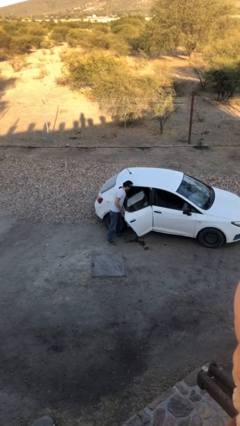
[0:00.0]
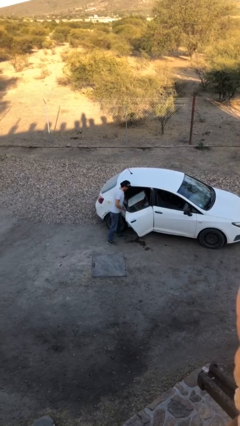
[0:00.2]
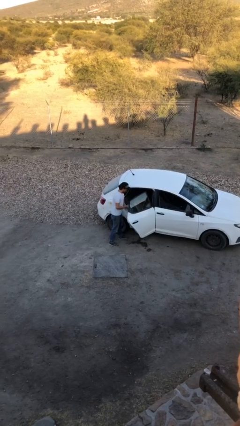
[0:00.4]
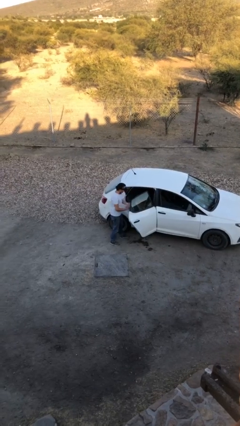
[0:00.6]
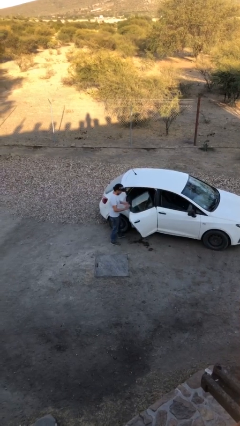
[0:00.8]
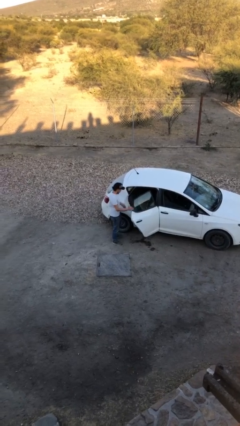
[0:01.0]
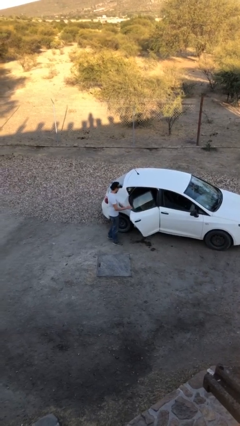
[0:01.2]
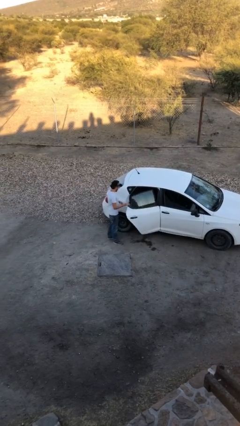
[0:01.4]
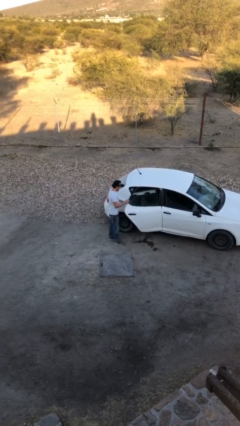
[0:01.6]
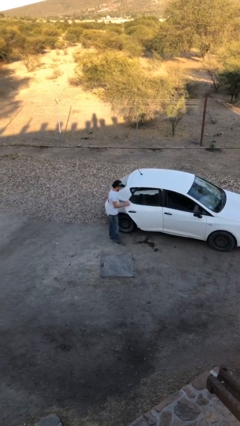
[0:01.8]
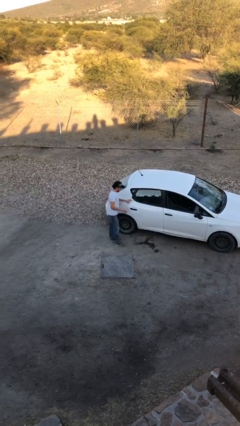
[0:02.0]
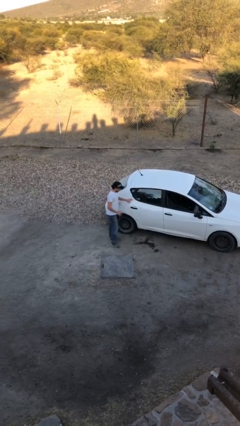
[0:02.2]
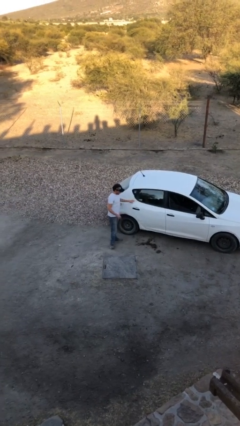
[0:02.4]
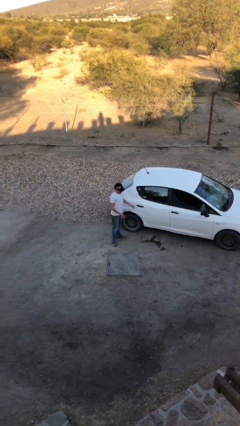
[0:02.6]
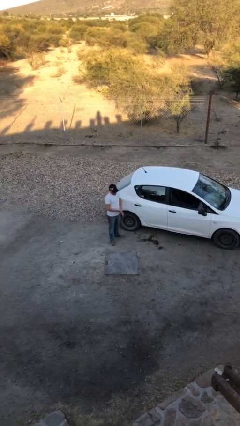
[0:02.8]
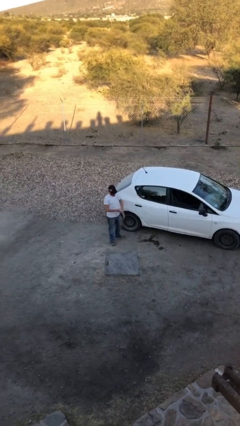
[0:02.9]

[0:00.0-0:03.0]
person closes car door

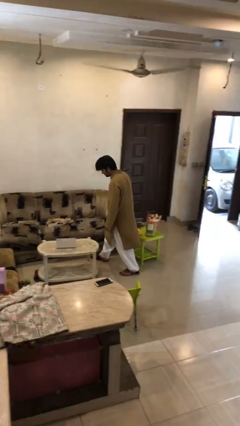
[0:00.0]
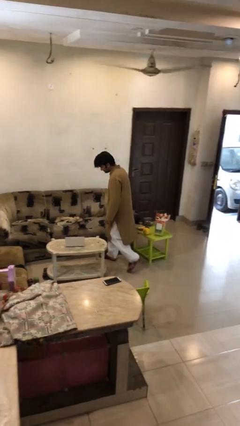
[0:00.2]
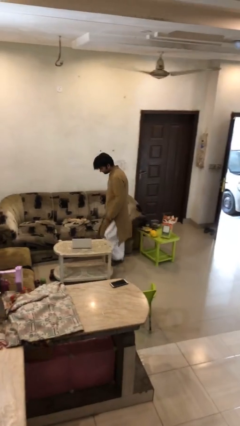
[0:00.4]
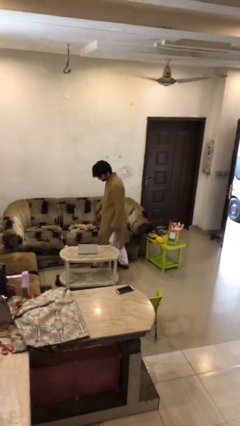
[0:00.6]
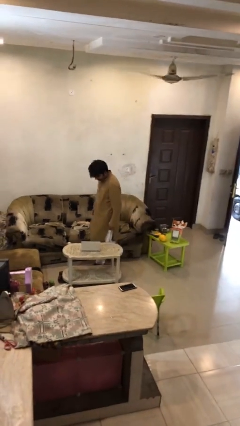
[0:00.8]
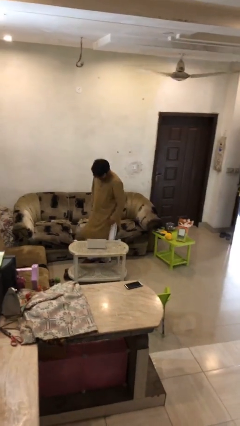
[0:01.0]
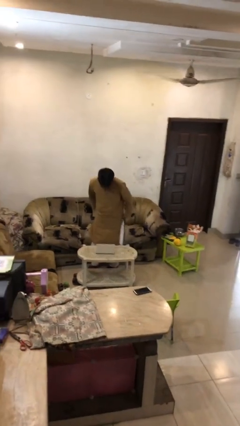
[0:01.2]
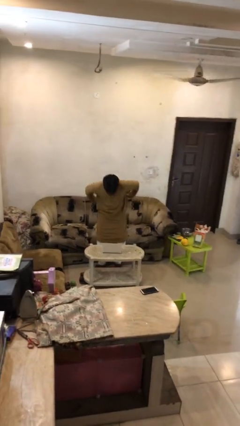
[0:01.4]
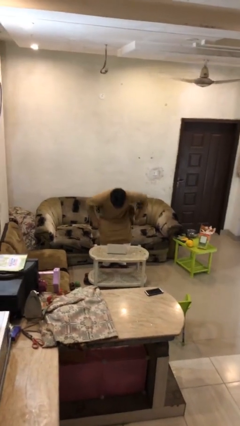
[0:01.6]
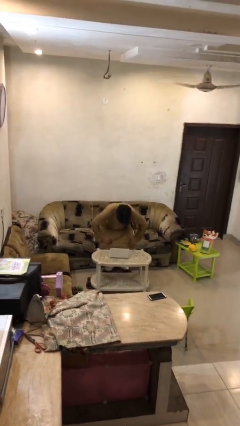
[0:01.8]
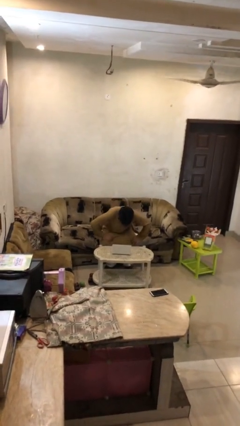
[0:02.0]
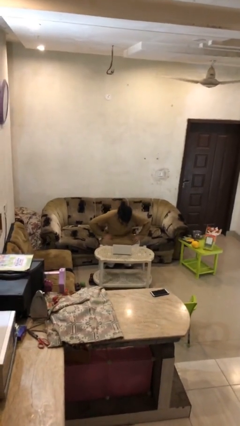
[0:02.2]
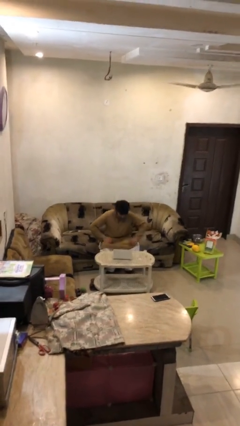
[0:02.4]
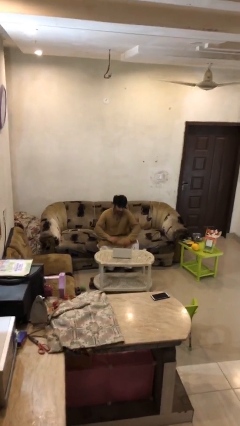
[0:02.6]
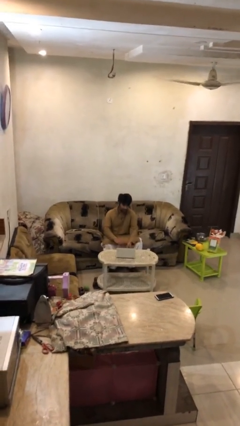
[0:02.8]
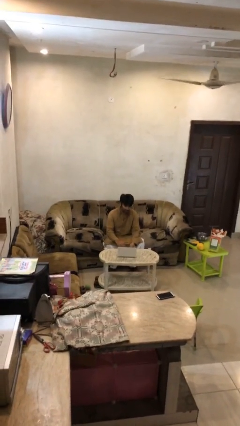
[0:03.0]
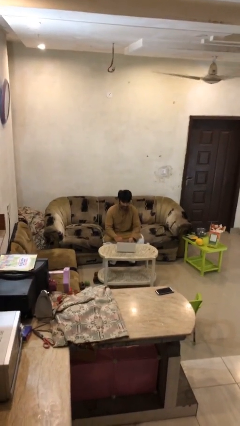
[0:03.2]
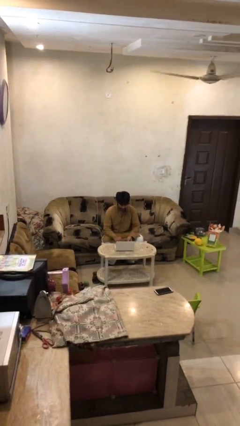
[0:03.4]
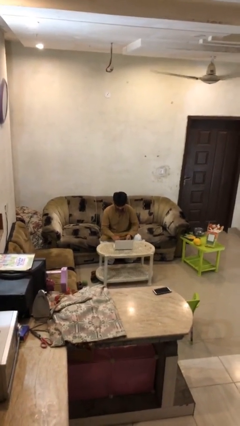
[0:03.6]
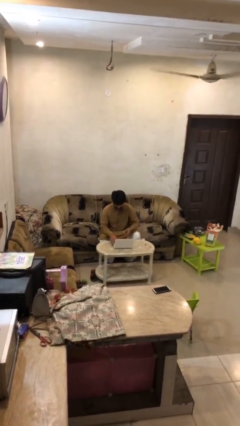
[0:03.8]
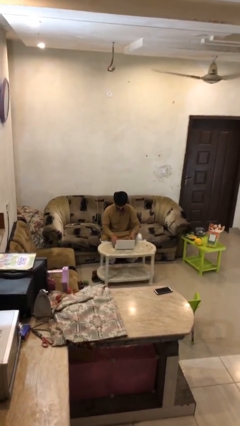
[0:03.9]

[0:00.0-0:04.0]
person sits down

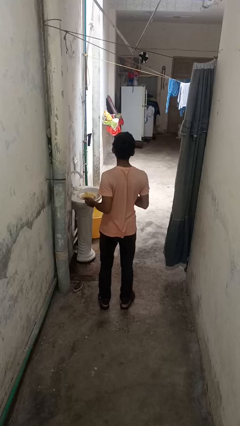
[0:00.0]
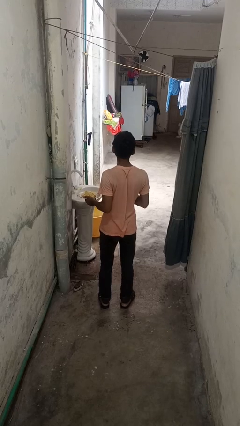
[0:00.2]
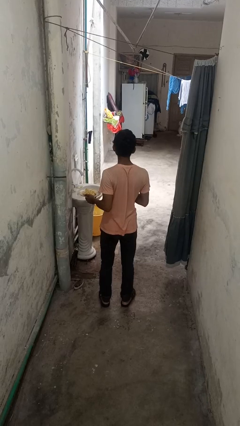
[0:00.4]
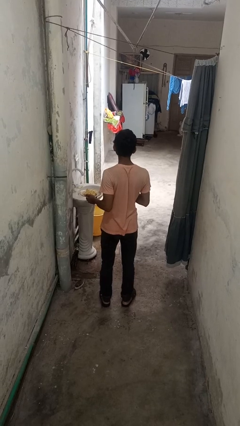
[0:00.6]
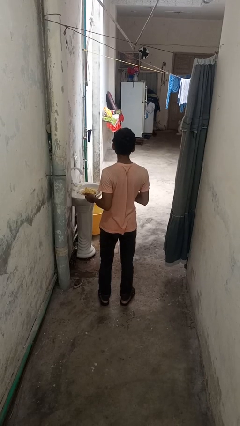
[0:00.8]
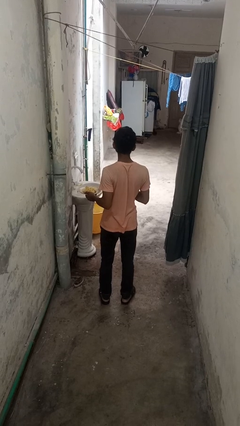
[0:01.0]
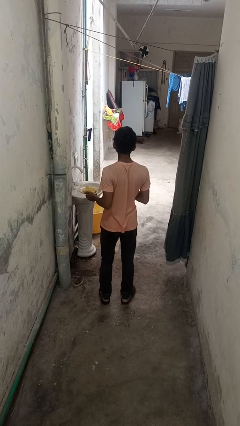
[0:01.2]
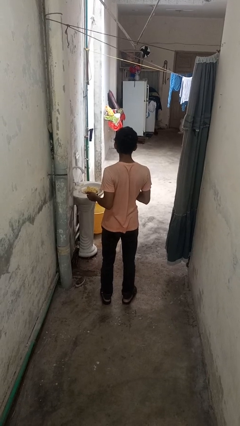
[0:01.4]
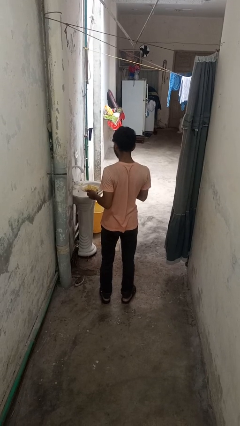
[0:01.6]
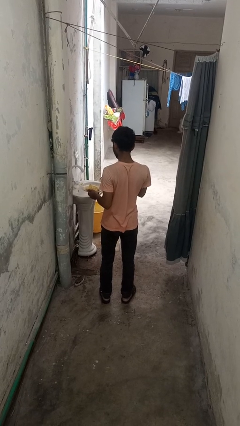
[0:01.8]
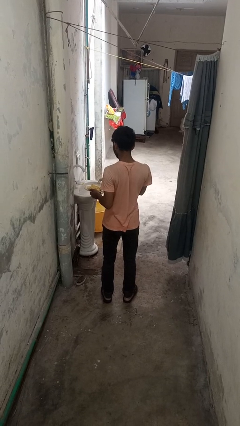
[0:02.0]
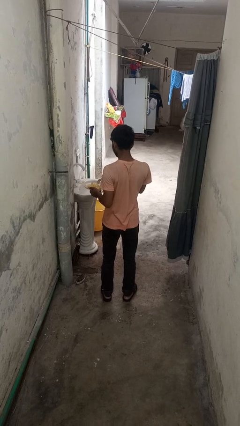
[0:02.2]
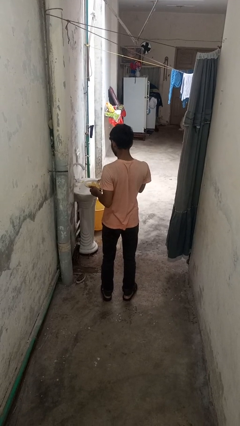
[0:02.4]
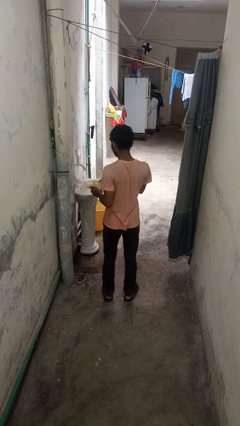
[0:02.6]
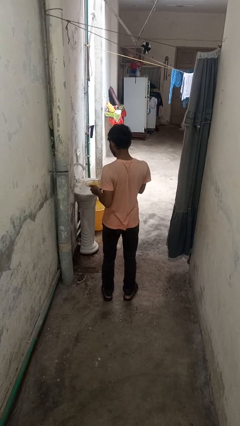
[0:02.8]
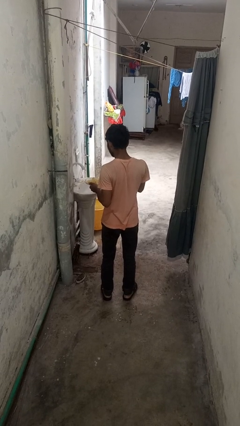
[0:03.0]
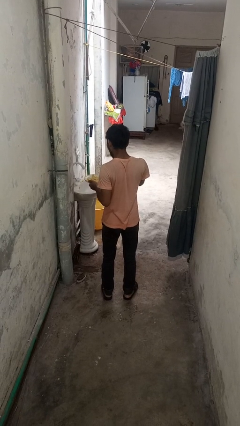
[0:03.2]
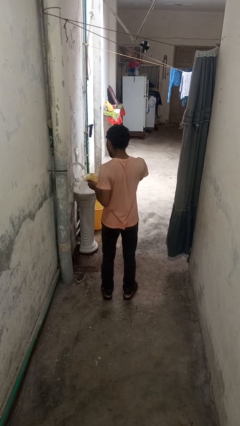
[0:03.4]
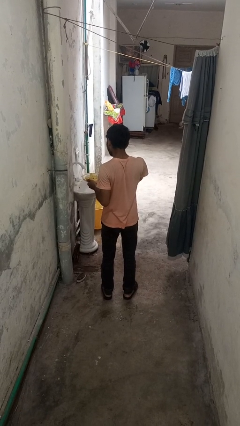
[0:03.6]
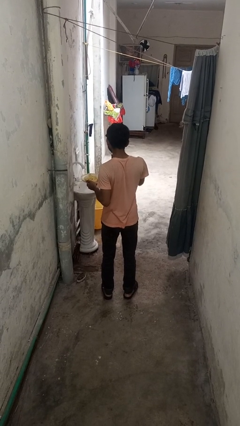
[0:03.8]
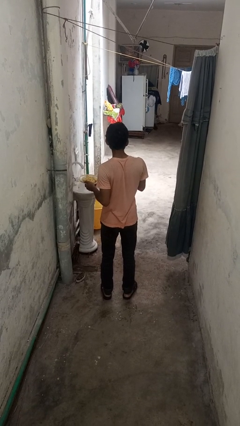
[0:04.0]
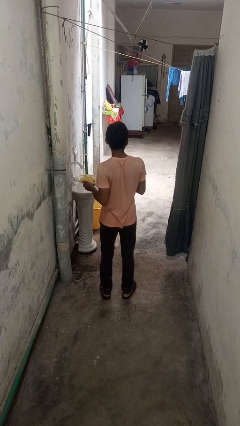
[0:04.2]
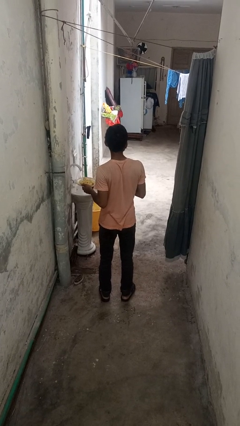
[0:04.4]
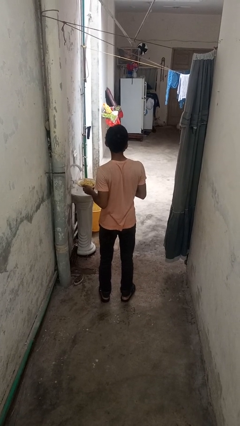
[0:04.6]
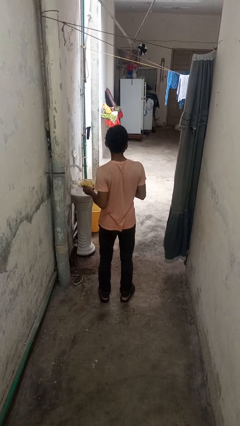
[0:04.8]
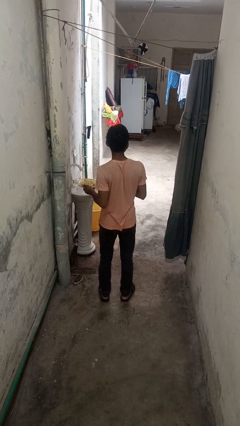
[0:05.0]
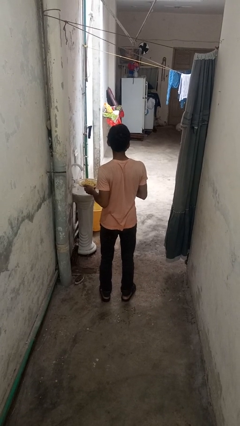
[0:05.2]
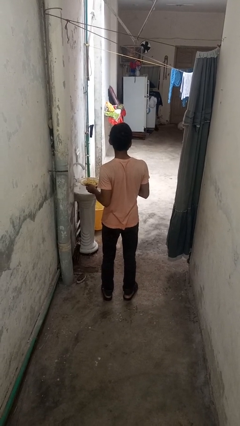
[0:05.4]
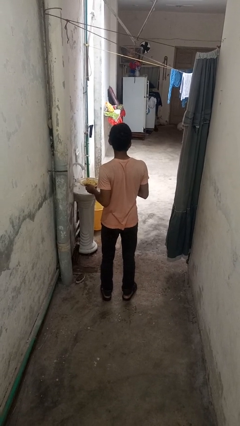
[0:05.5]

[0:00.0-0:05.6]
person eats with utensil

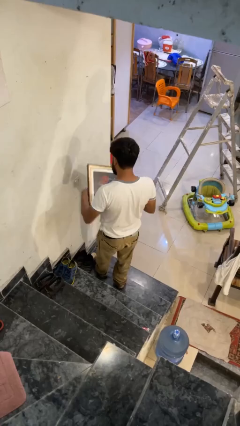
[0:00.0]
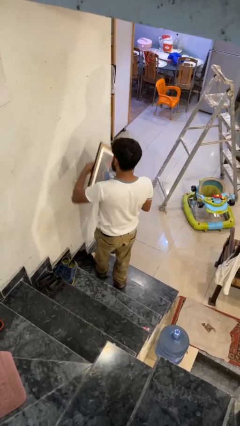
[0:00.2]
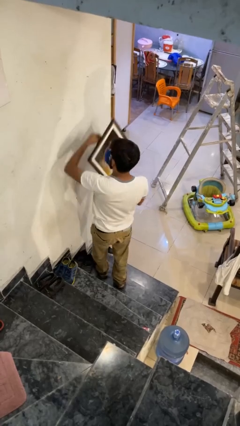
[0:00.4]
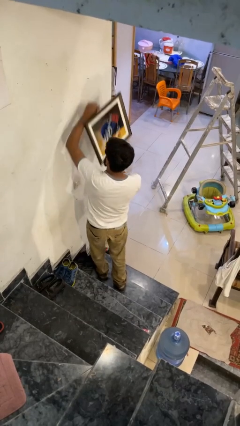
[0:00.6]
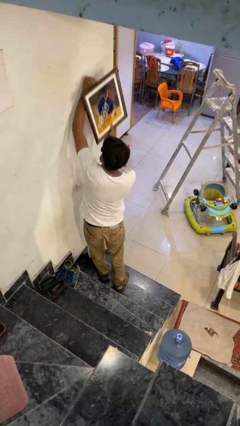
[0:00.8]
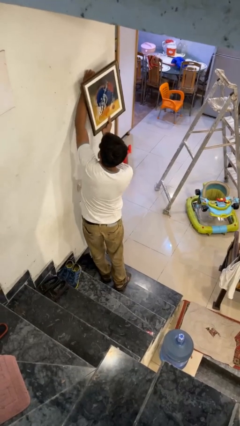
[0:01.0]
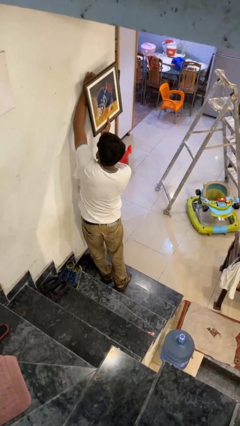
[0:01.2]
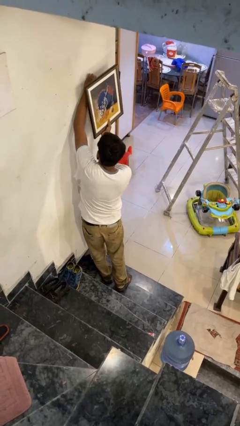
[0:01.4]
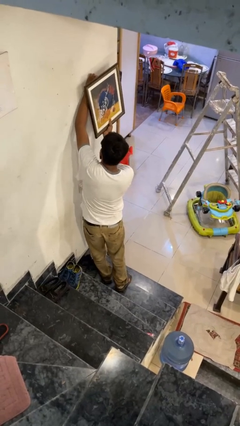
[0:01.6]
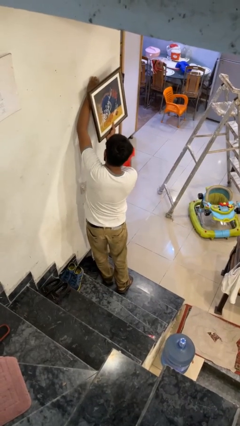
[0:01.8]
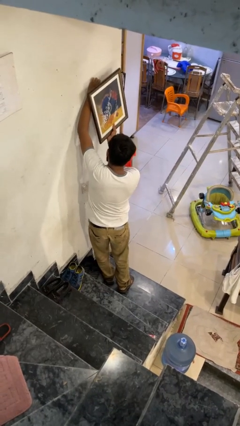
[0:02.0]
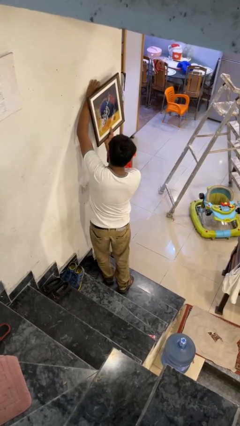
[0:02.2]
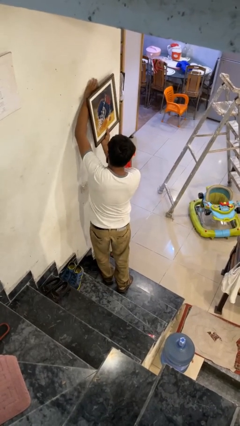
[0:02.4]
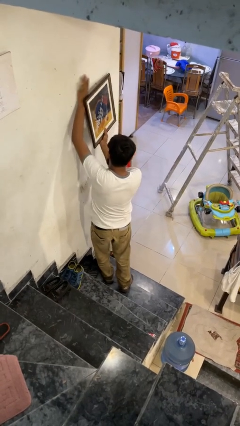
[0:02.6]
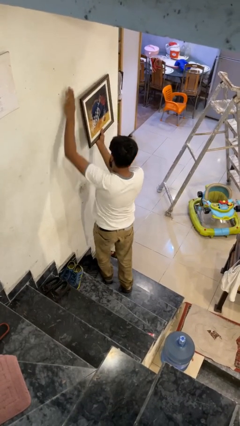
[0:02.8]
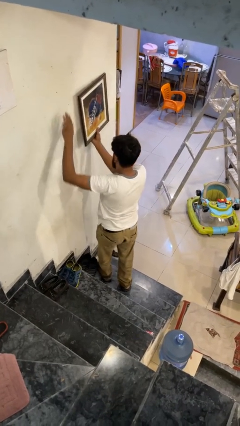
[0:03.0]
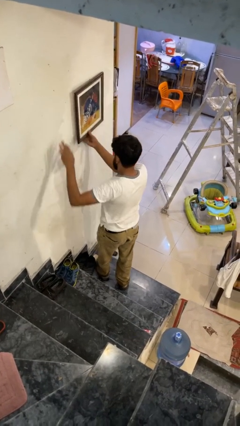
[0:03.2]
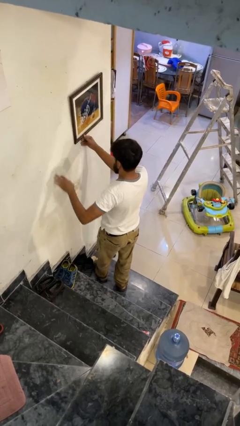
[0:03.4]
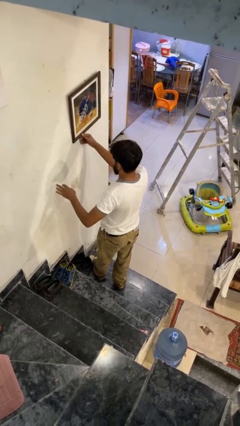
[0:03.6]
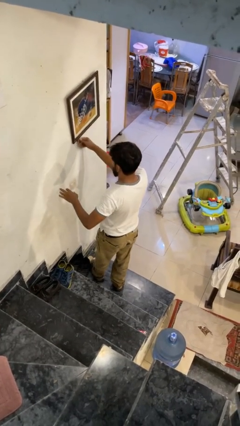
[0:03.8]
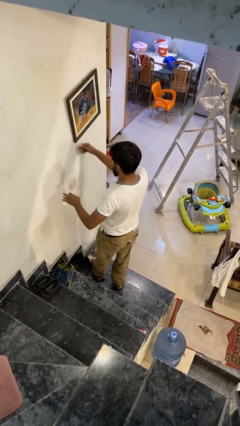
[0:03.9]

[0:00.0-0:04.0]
person puts up picture frame

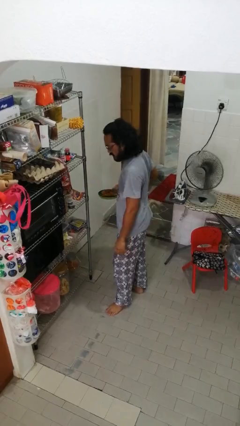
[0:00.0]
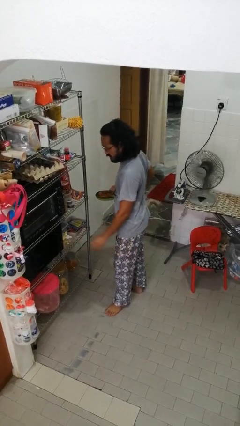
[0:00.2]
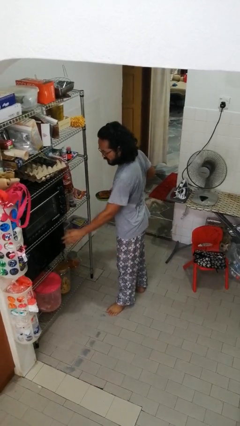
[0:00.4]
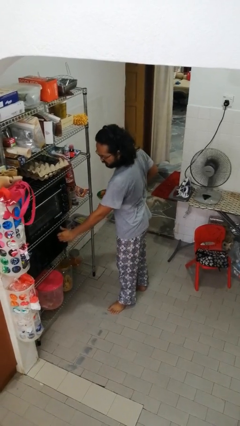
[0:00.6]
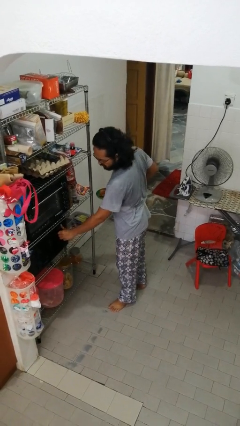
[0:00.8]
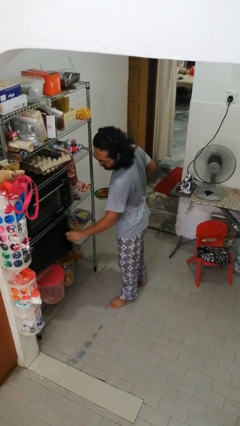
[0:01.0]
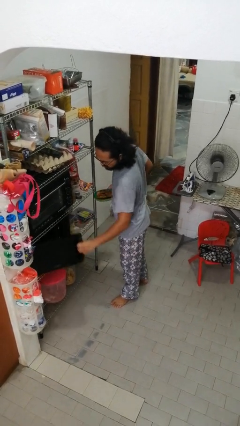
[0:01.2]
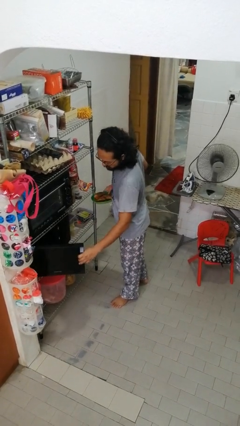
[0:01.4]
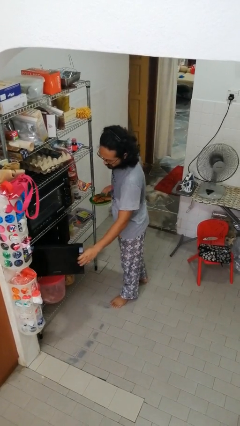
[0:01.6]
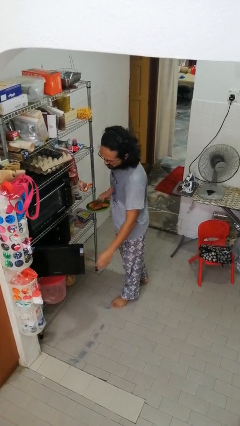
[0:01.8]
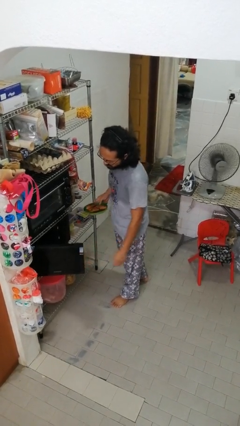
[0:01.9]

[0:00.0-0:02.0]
person opens microwave
